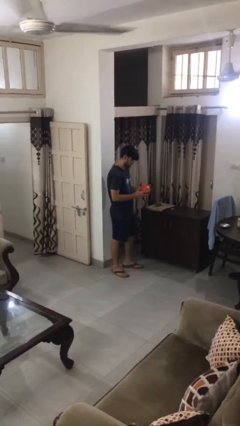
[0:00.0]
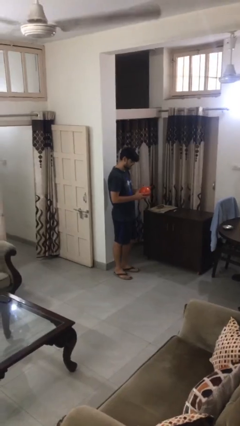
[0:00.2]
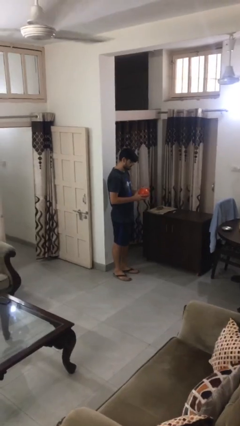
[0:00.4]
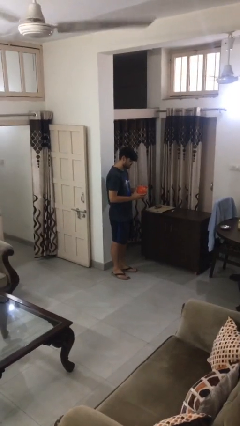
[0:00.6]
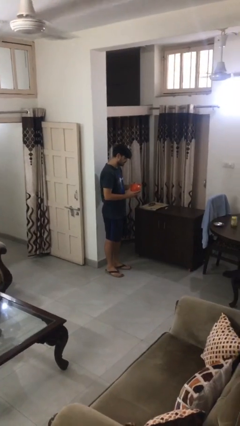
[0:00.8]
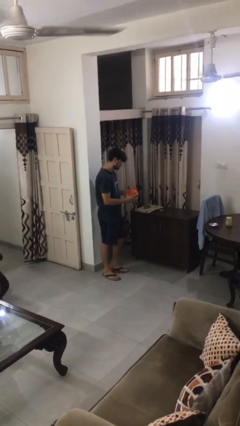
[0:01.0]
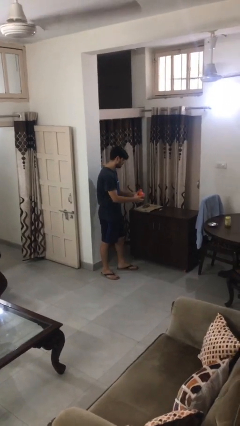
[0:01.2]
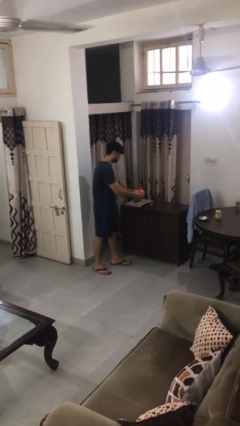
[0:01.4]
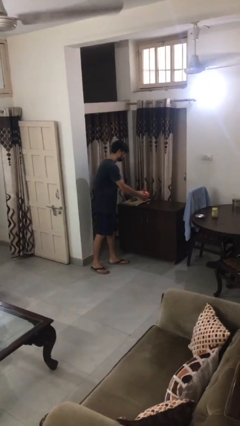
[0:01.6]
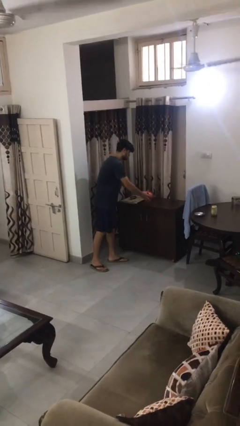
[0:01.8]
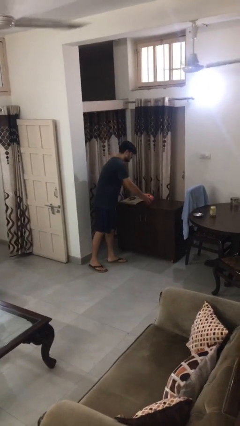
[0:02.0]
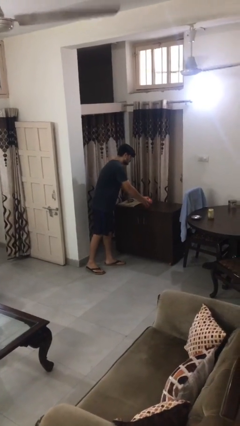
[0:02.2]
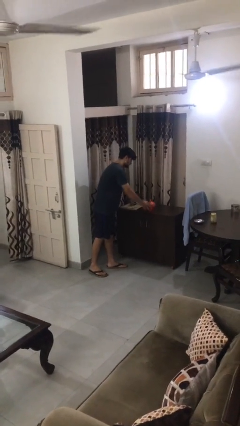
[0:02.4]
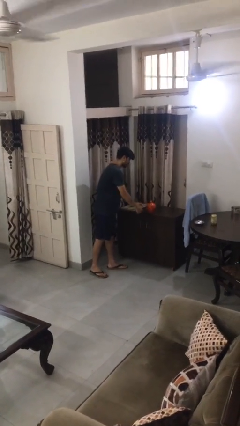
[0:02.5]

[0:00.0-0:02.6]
person puts down object on countertop

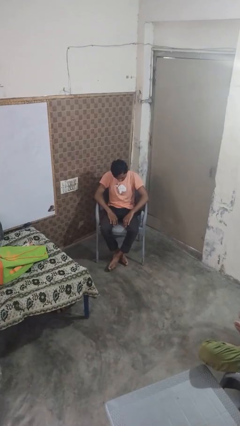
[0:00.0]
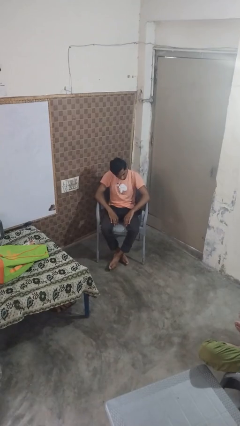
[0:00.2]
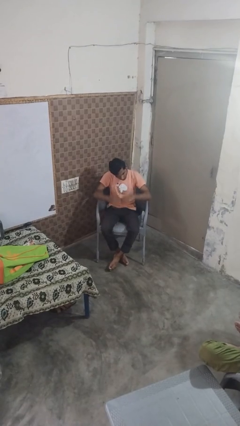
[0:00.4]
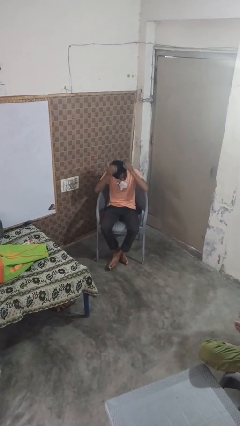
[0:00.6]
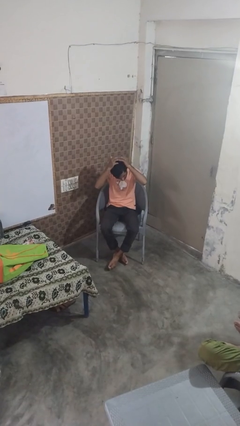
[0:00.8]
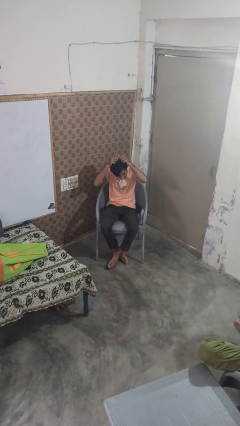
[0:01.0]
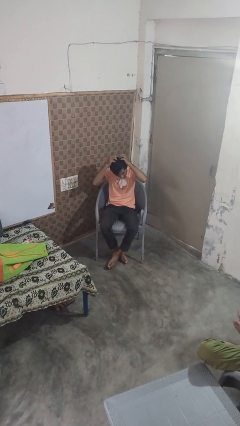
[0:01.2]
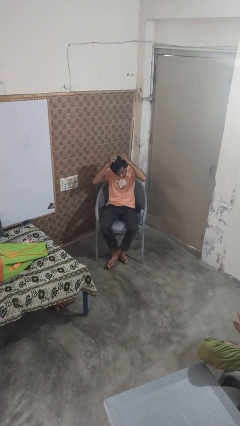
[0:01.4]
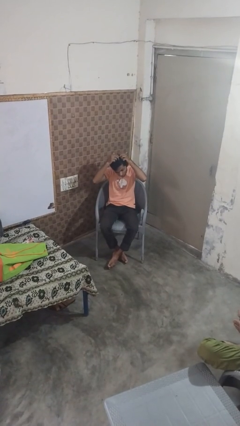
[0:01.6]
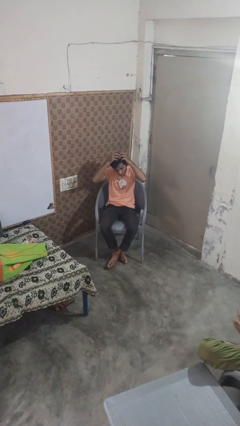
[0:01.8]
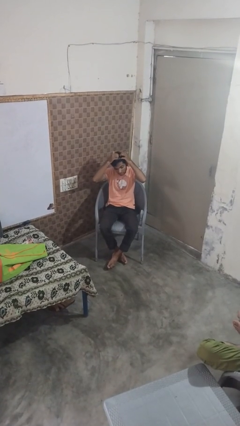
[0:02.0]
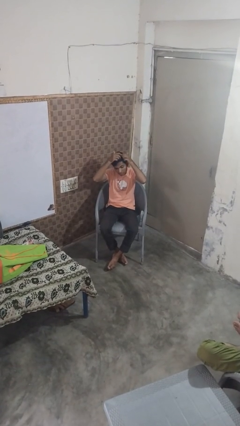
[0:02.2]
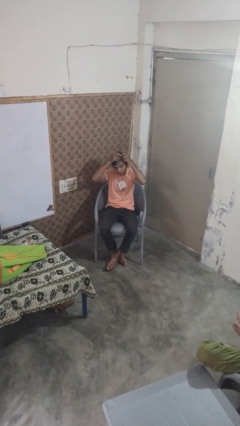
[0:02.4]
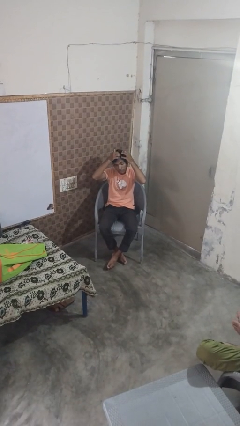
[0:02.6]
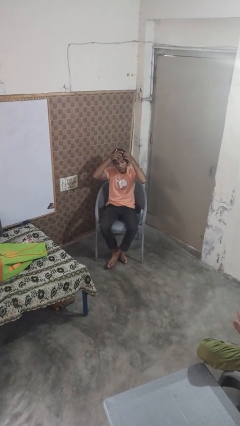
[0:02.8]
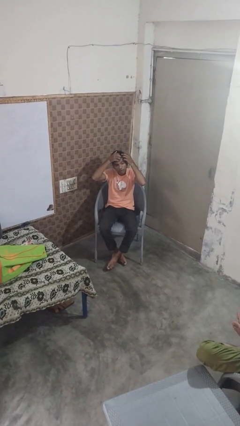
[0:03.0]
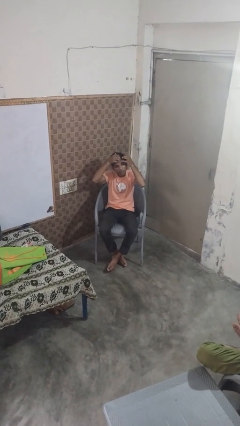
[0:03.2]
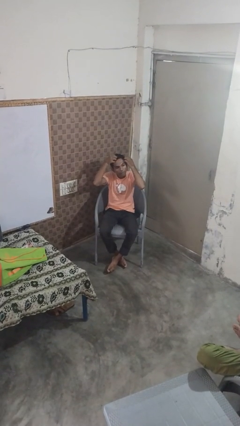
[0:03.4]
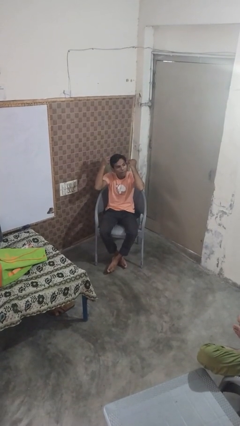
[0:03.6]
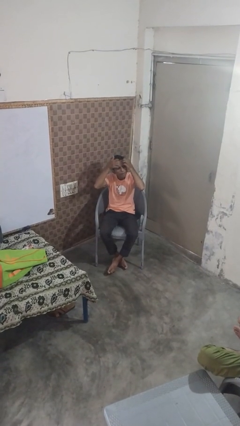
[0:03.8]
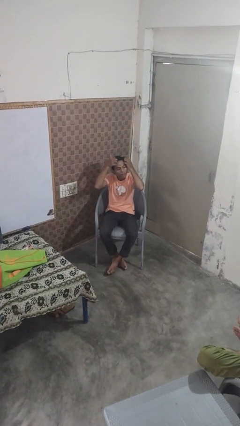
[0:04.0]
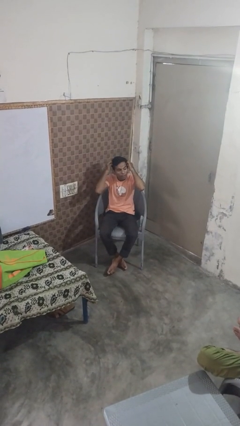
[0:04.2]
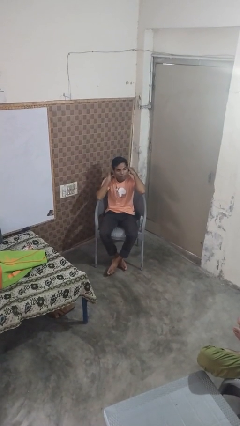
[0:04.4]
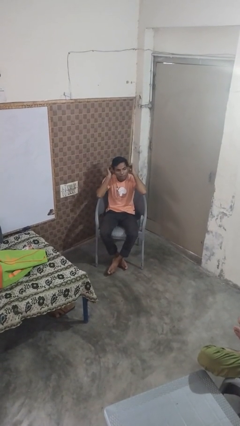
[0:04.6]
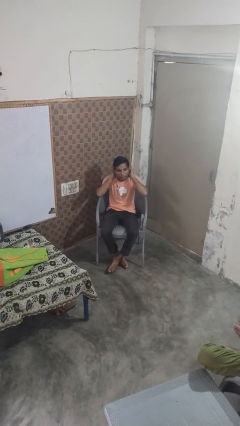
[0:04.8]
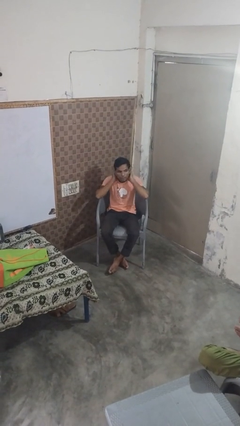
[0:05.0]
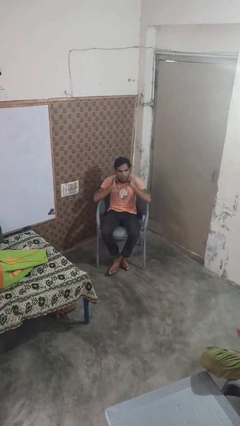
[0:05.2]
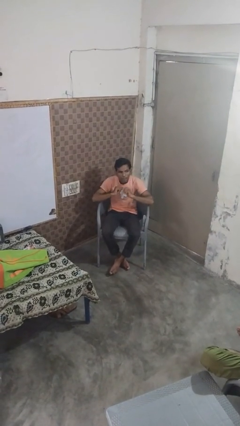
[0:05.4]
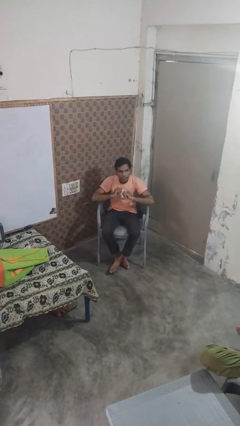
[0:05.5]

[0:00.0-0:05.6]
person strokes hair

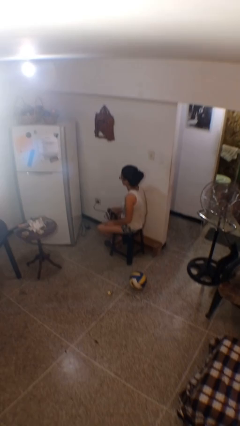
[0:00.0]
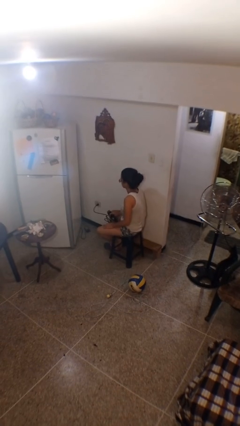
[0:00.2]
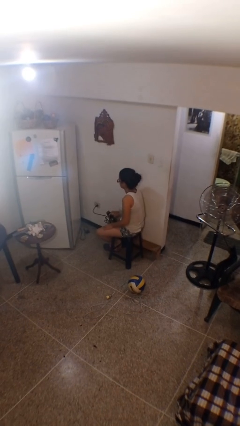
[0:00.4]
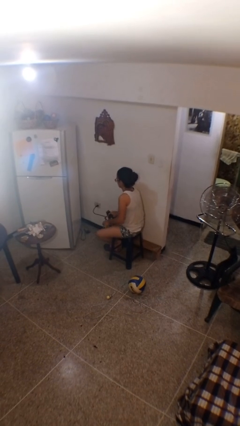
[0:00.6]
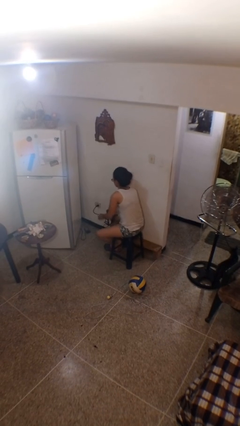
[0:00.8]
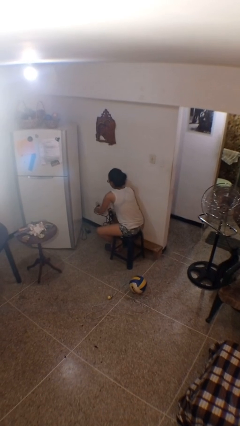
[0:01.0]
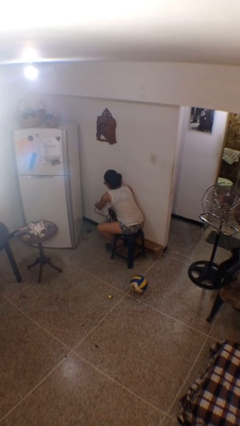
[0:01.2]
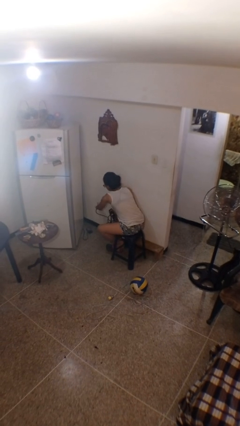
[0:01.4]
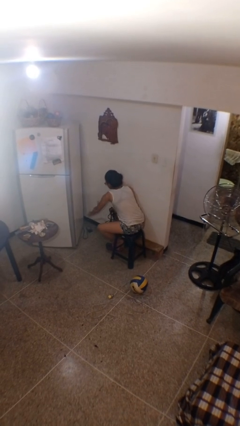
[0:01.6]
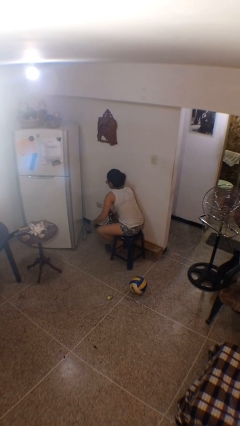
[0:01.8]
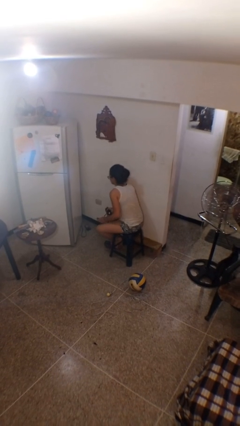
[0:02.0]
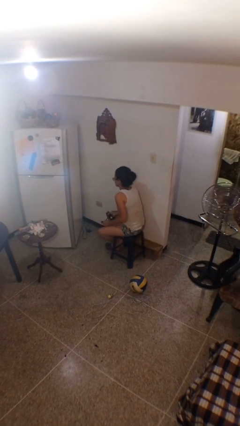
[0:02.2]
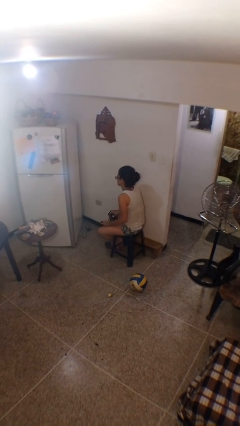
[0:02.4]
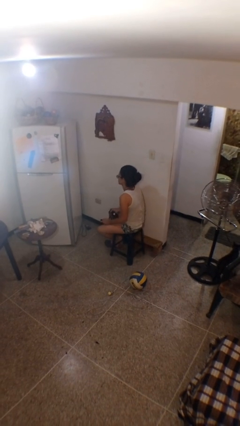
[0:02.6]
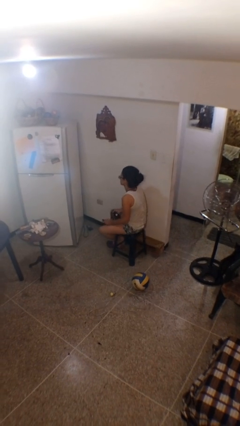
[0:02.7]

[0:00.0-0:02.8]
person unplugs from electrical socket

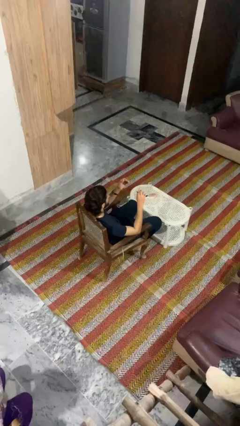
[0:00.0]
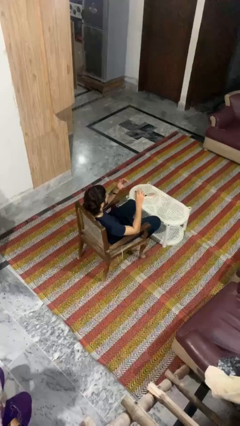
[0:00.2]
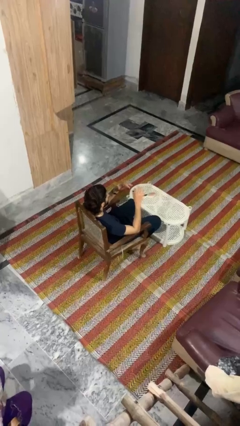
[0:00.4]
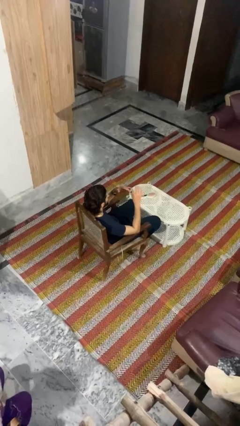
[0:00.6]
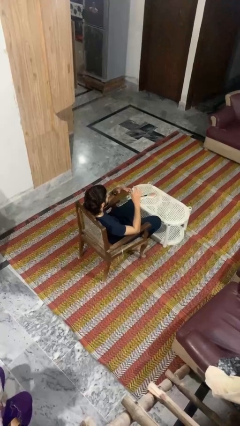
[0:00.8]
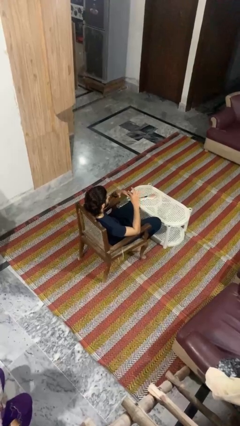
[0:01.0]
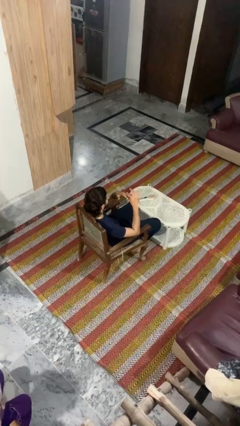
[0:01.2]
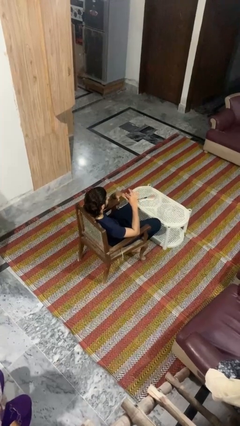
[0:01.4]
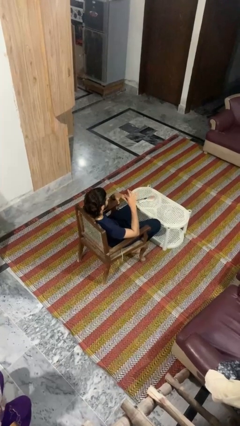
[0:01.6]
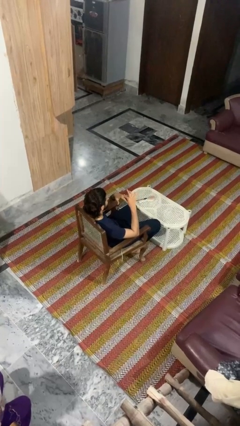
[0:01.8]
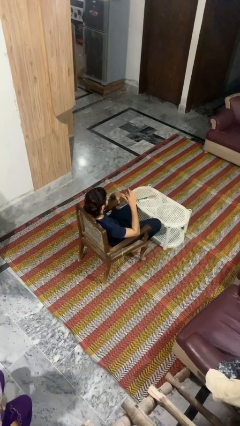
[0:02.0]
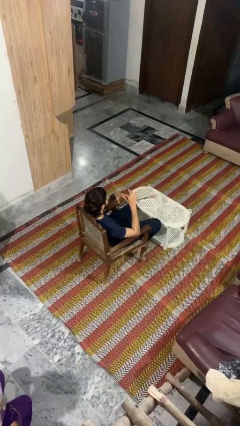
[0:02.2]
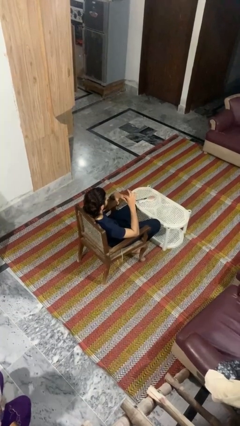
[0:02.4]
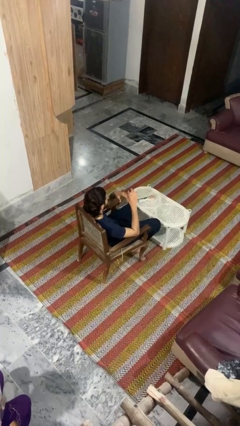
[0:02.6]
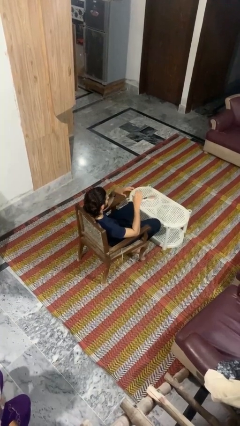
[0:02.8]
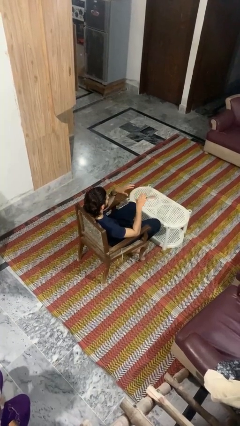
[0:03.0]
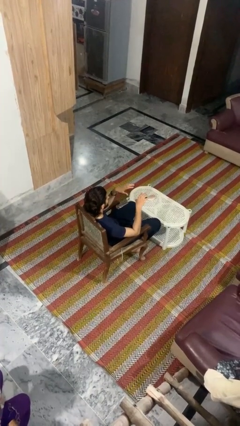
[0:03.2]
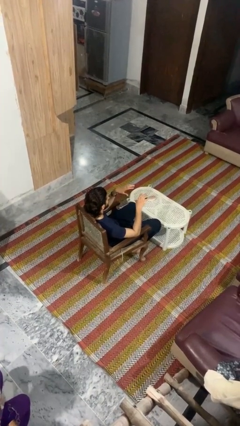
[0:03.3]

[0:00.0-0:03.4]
person puts on ring

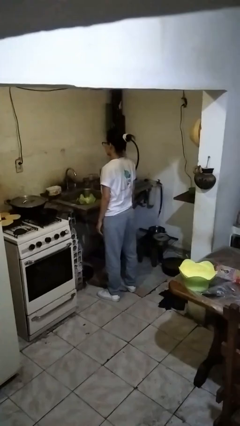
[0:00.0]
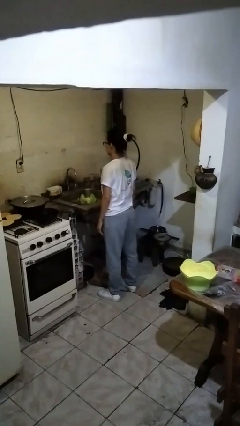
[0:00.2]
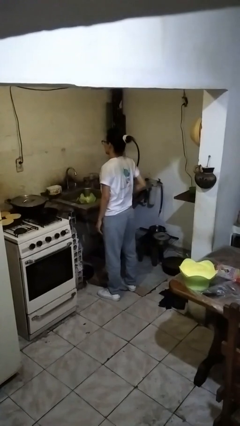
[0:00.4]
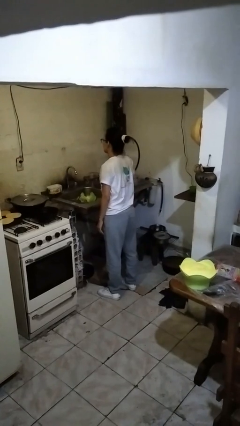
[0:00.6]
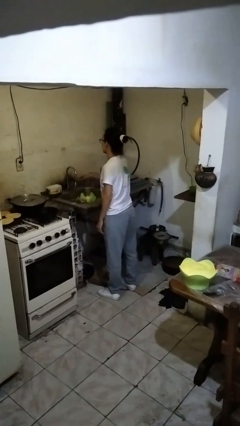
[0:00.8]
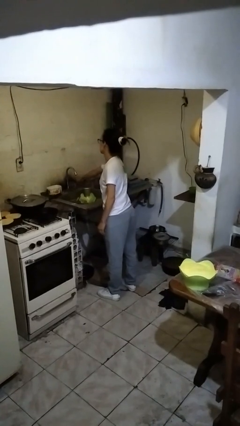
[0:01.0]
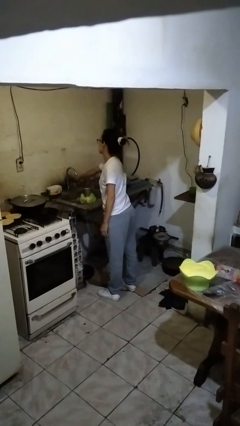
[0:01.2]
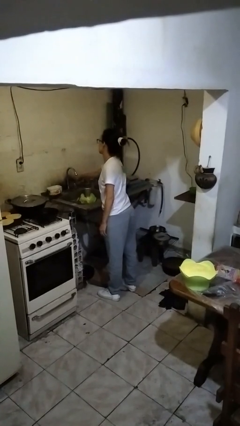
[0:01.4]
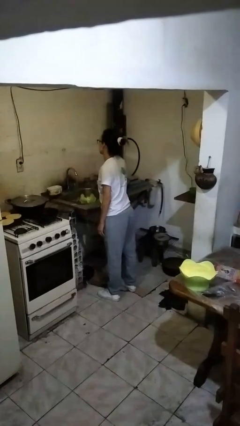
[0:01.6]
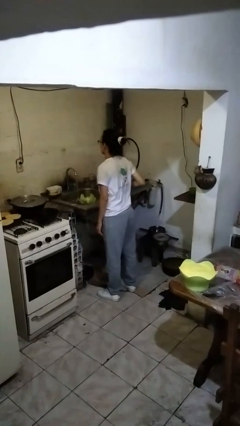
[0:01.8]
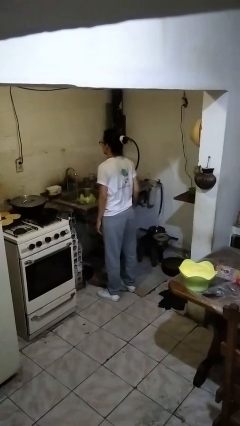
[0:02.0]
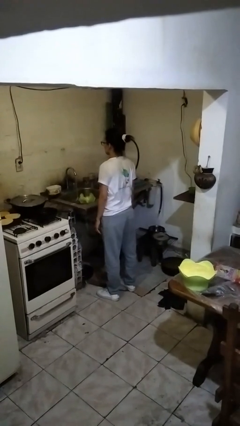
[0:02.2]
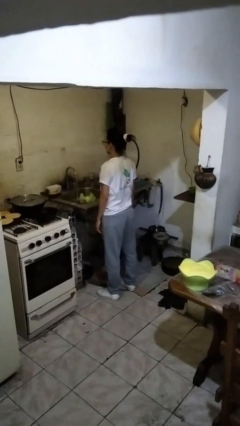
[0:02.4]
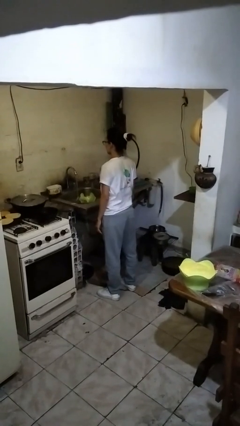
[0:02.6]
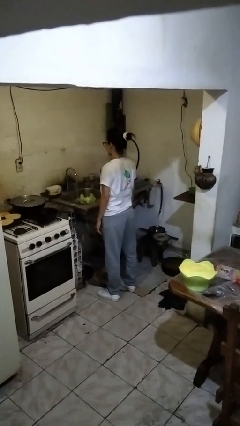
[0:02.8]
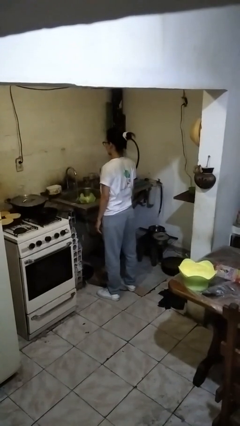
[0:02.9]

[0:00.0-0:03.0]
person turns on faucet

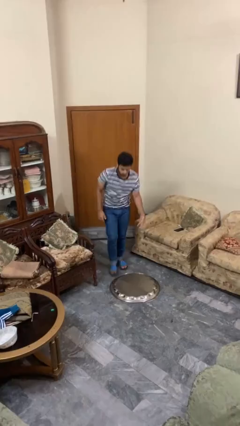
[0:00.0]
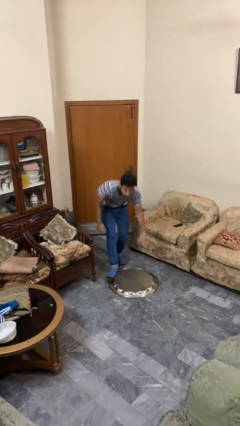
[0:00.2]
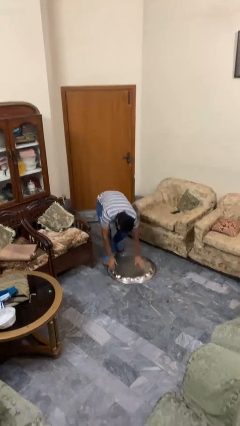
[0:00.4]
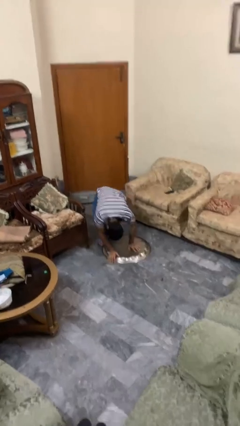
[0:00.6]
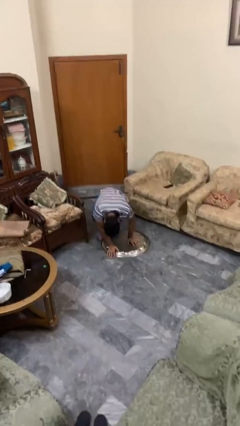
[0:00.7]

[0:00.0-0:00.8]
person trips on object on floor
